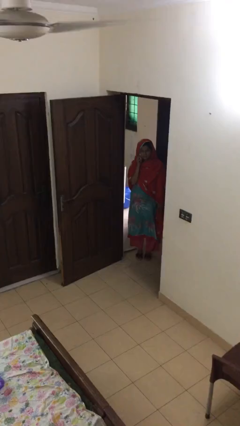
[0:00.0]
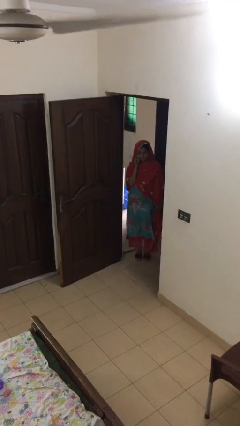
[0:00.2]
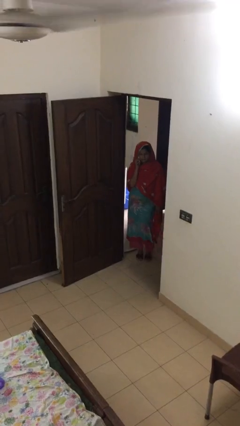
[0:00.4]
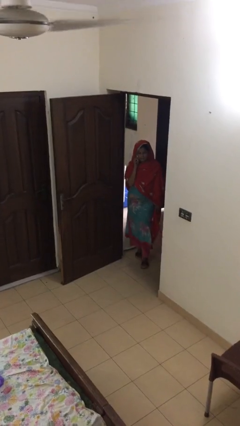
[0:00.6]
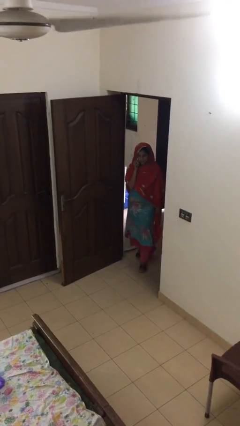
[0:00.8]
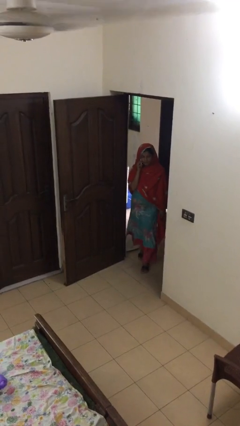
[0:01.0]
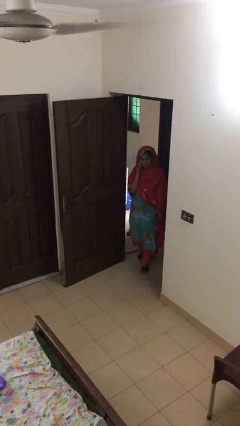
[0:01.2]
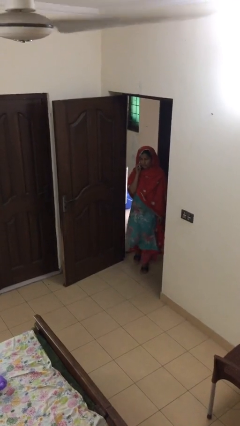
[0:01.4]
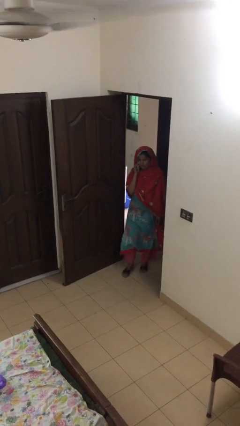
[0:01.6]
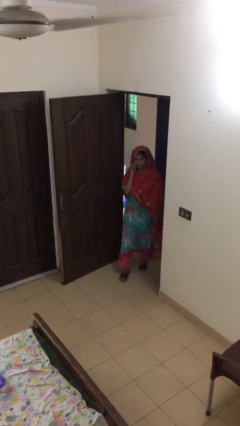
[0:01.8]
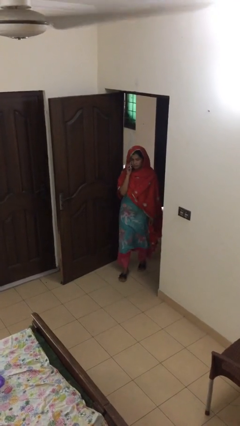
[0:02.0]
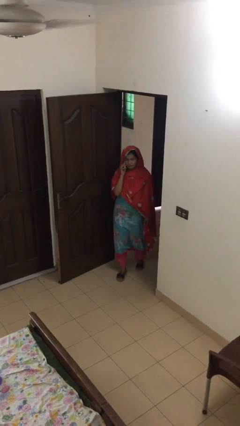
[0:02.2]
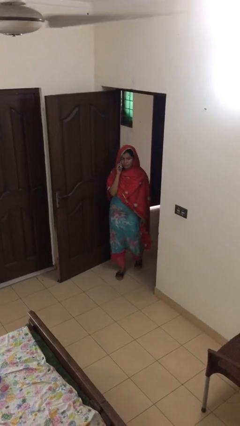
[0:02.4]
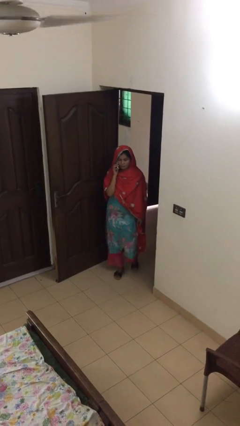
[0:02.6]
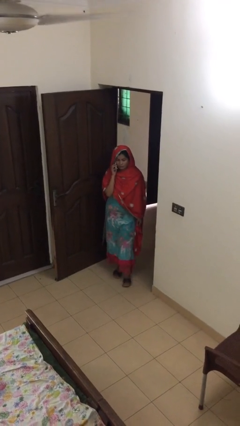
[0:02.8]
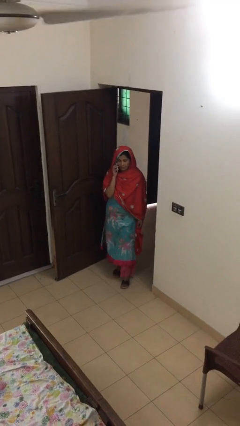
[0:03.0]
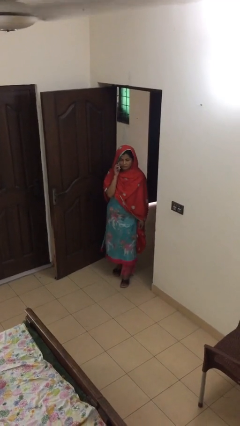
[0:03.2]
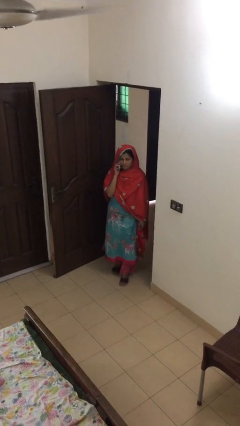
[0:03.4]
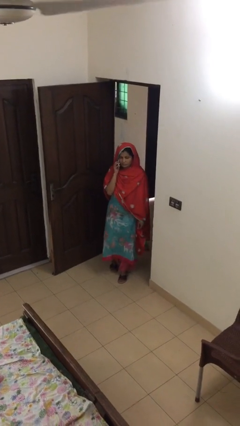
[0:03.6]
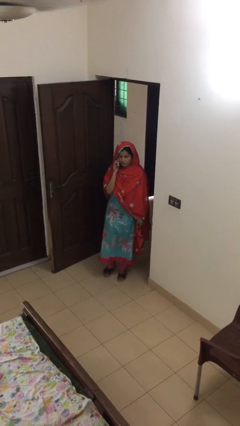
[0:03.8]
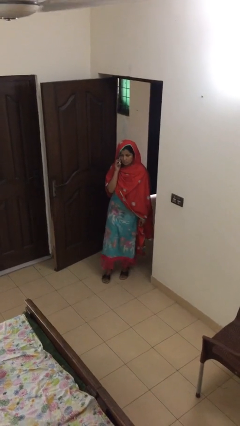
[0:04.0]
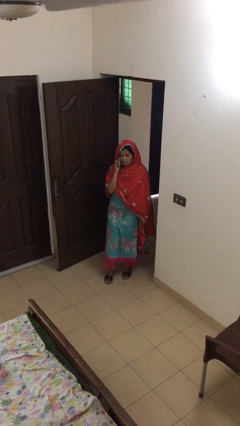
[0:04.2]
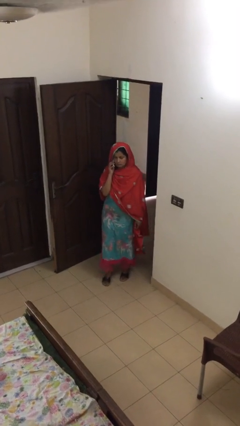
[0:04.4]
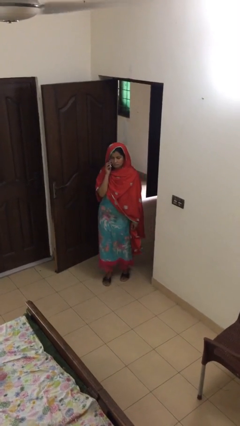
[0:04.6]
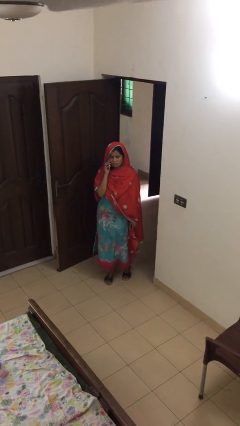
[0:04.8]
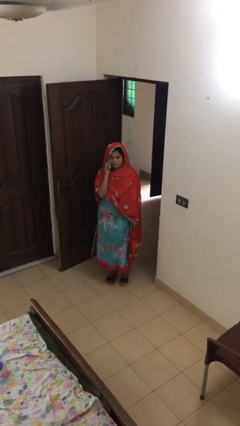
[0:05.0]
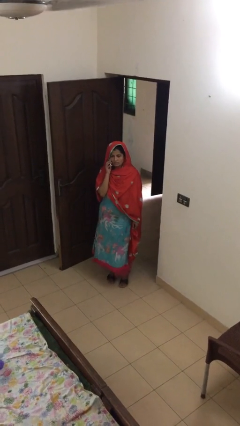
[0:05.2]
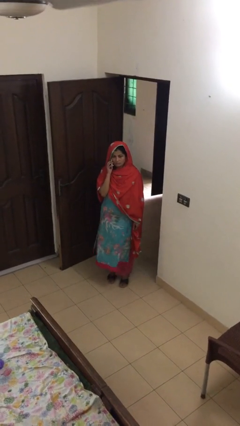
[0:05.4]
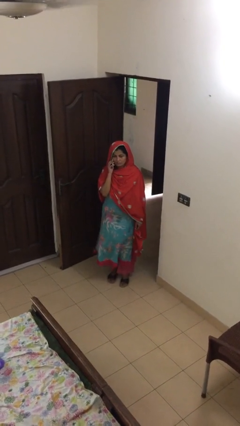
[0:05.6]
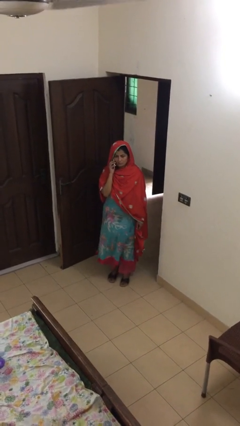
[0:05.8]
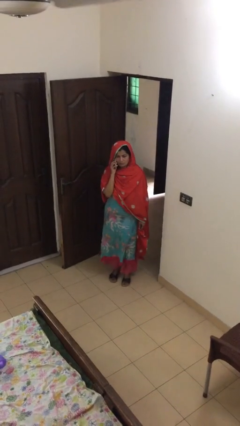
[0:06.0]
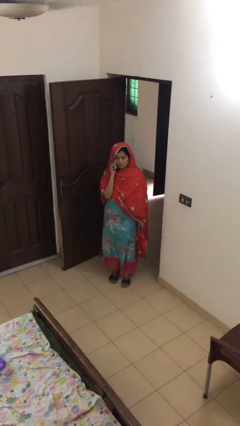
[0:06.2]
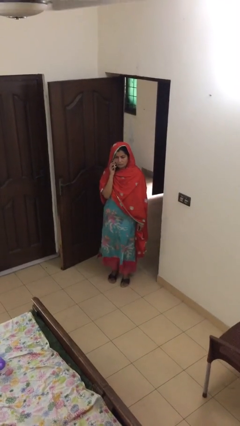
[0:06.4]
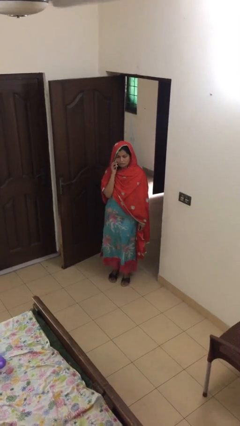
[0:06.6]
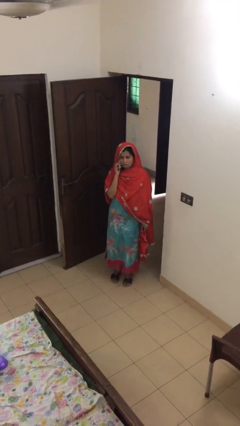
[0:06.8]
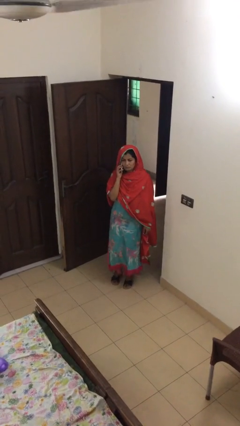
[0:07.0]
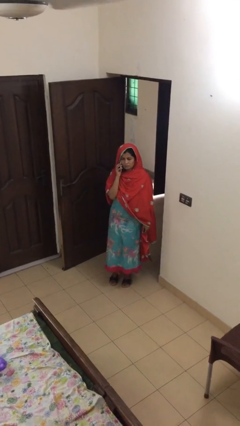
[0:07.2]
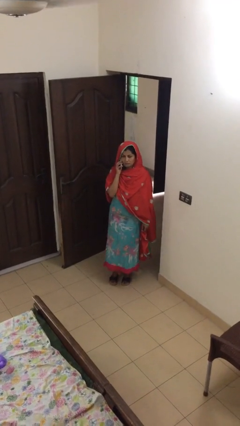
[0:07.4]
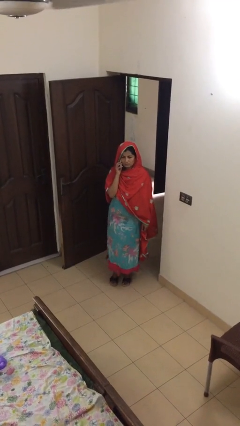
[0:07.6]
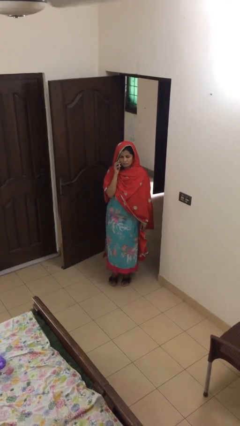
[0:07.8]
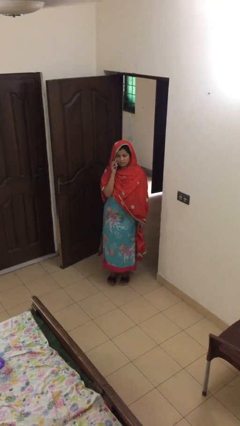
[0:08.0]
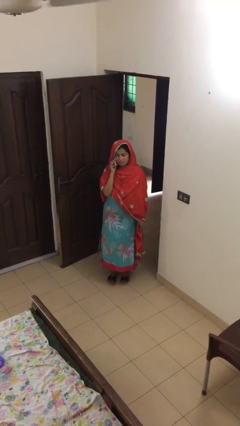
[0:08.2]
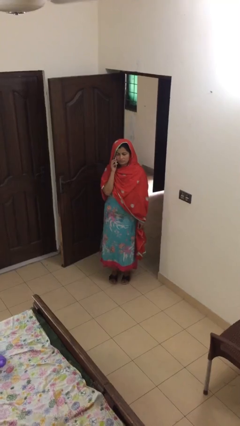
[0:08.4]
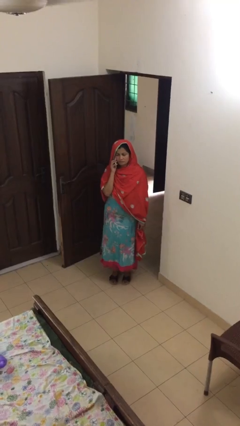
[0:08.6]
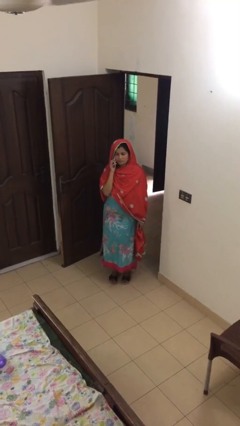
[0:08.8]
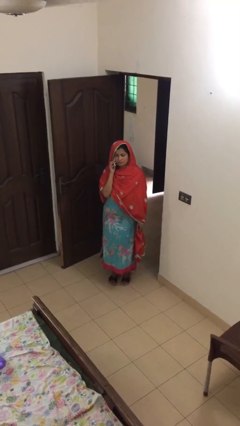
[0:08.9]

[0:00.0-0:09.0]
person enters scene through structure

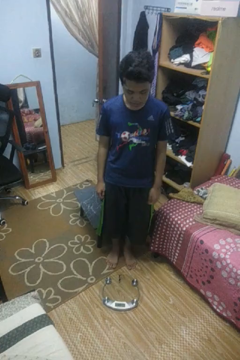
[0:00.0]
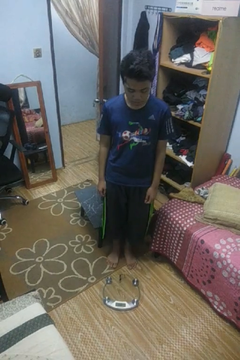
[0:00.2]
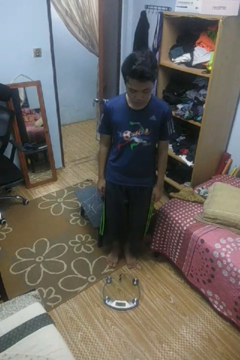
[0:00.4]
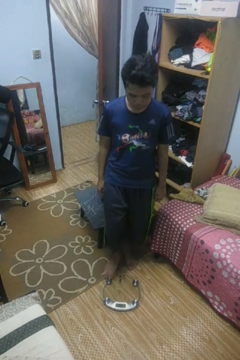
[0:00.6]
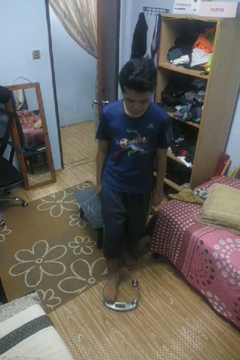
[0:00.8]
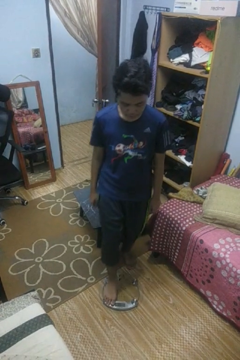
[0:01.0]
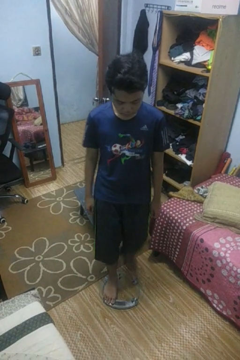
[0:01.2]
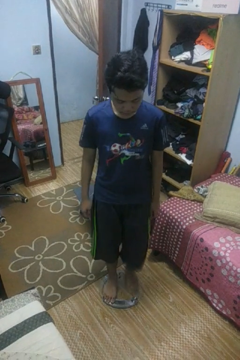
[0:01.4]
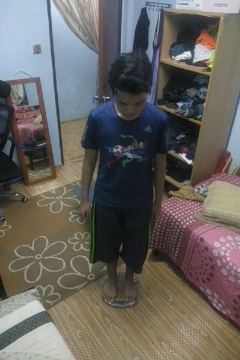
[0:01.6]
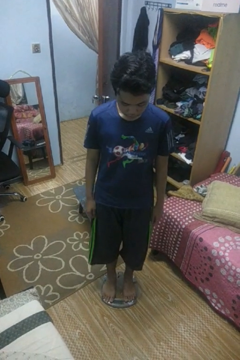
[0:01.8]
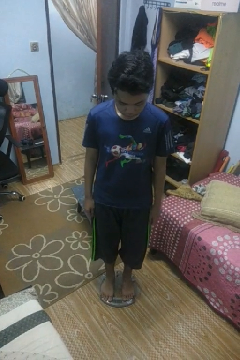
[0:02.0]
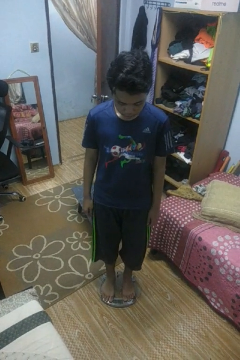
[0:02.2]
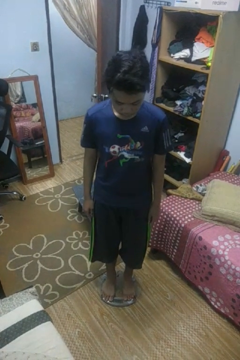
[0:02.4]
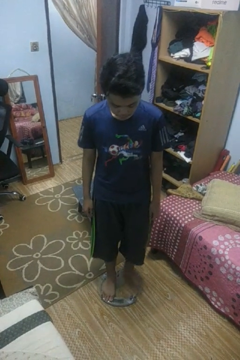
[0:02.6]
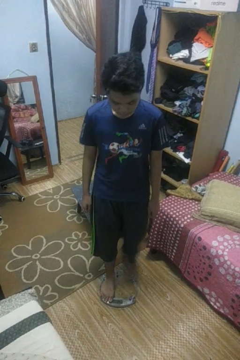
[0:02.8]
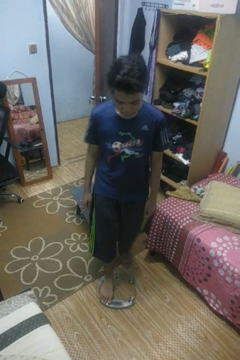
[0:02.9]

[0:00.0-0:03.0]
person uses bodyweight scale

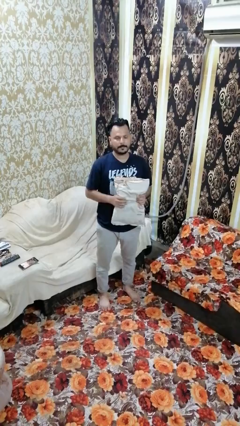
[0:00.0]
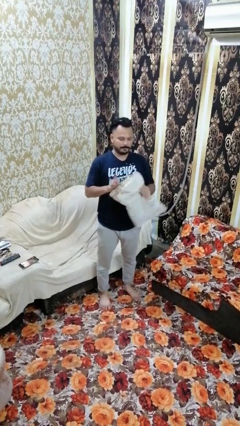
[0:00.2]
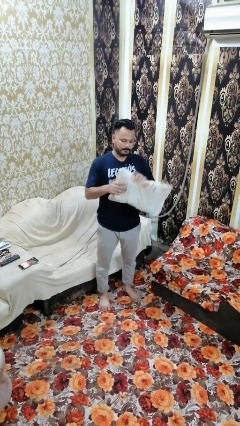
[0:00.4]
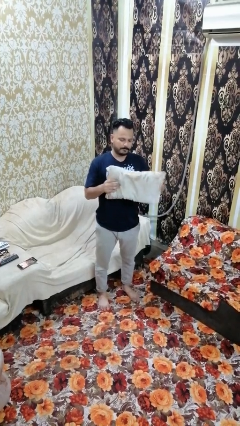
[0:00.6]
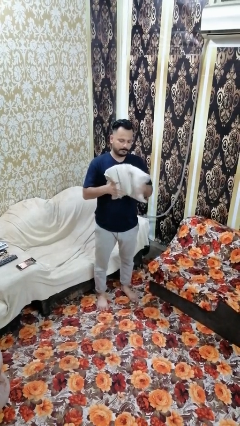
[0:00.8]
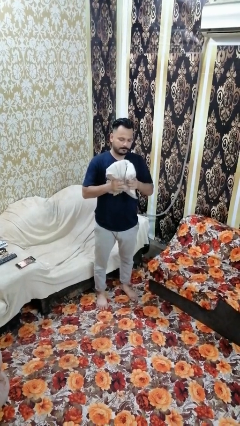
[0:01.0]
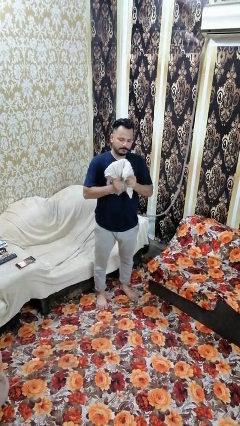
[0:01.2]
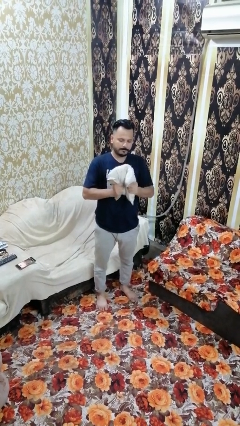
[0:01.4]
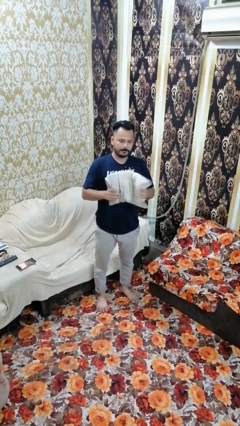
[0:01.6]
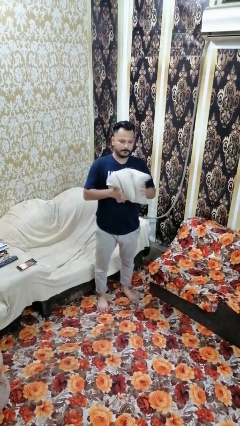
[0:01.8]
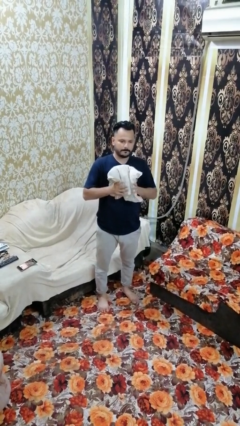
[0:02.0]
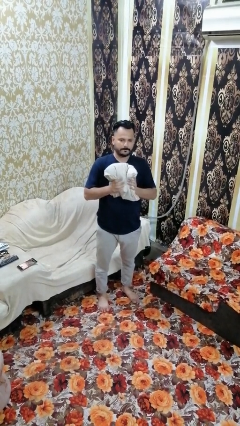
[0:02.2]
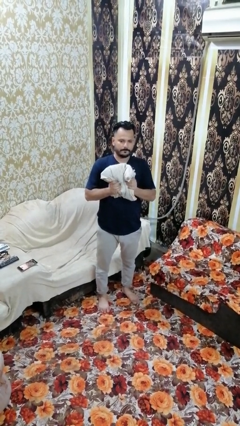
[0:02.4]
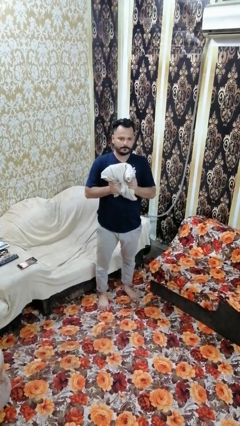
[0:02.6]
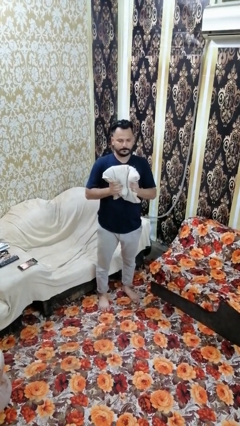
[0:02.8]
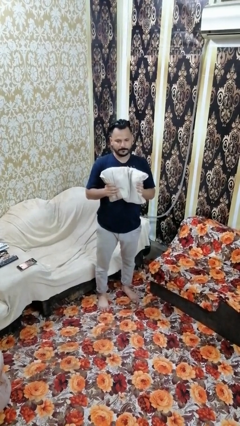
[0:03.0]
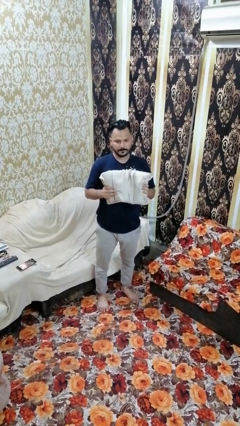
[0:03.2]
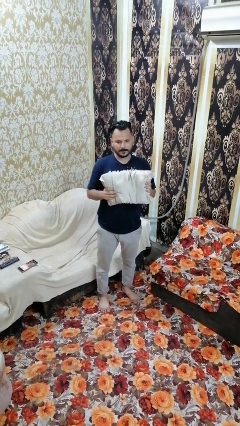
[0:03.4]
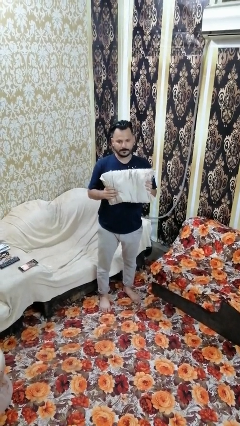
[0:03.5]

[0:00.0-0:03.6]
person squeezes object

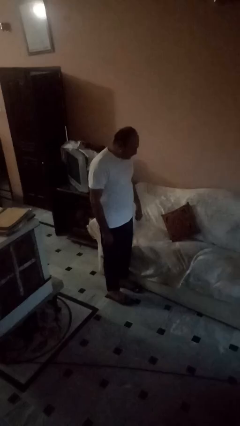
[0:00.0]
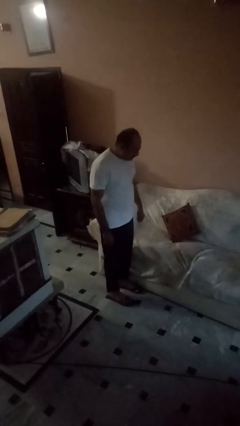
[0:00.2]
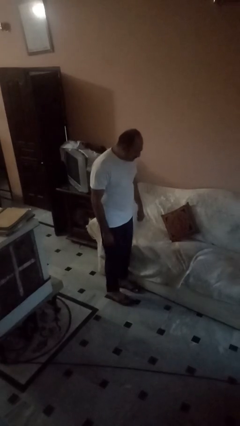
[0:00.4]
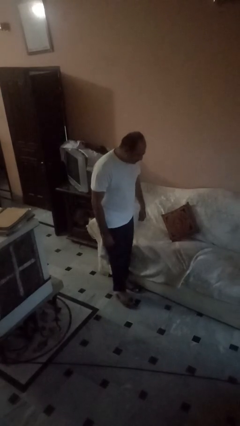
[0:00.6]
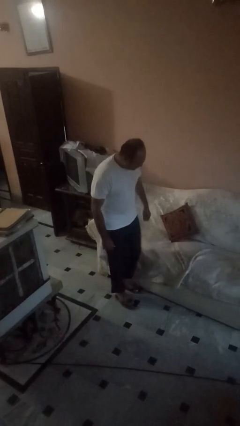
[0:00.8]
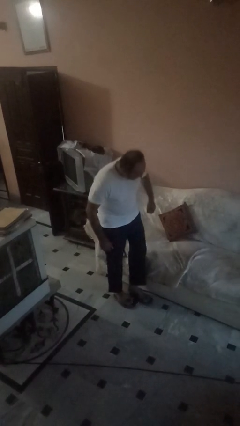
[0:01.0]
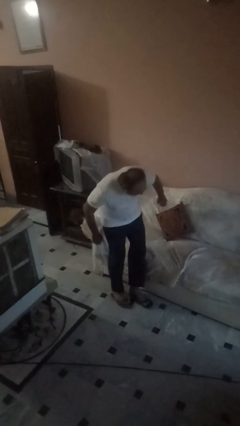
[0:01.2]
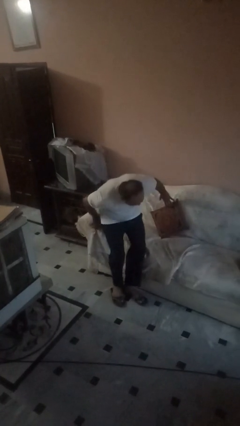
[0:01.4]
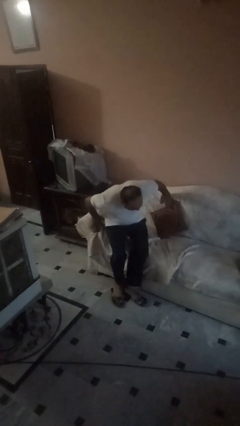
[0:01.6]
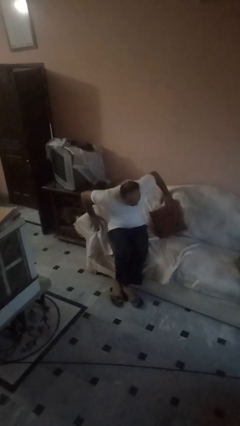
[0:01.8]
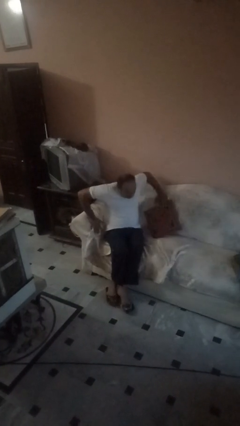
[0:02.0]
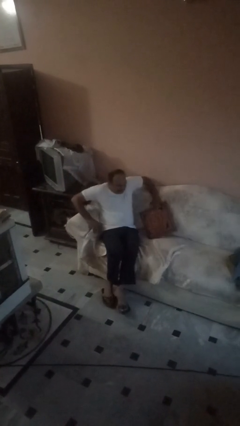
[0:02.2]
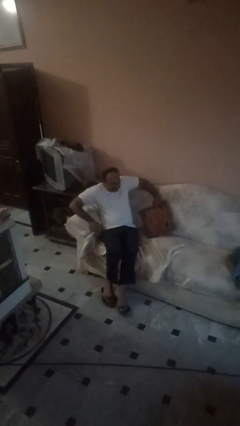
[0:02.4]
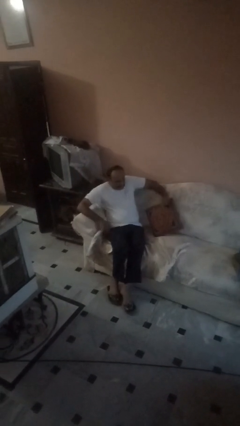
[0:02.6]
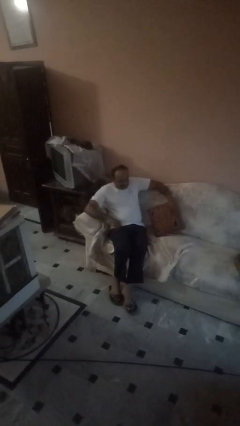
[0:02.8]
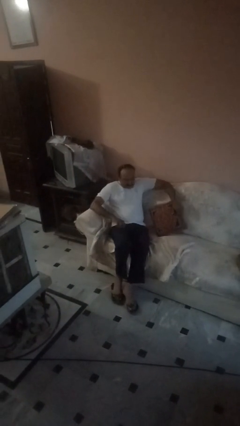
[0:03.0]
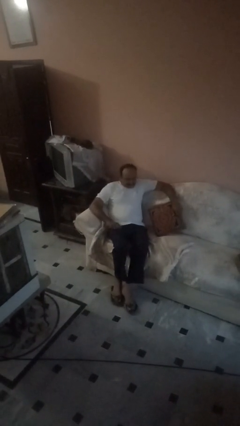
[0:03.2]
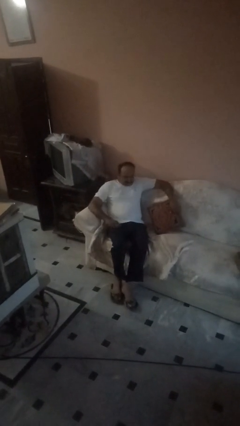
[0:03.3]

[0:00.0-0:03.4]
person lies down on couch
